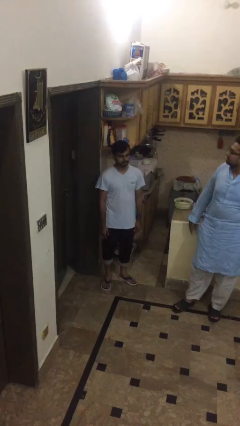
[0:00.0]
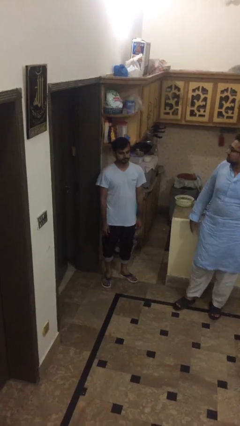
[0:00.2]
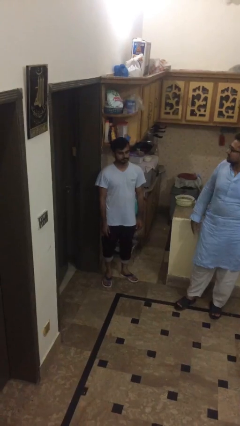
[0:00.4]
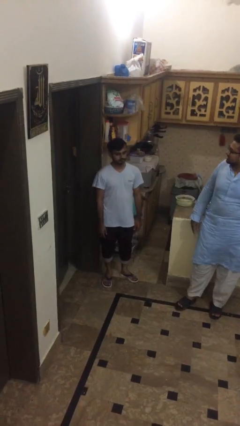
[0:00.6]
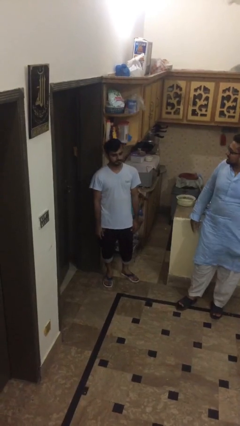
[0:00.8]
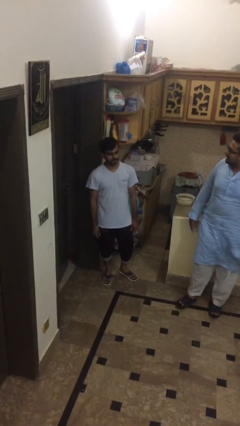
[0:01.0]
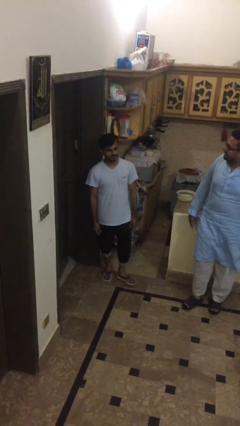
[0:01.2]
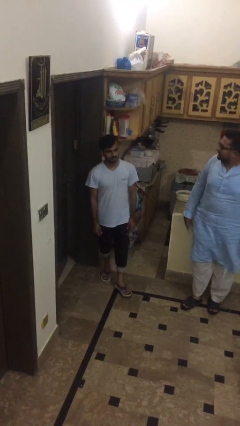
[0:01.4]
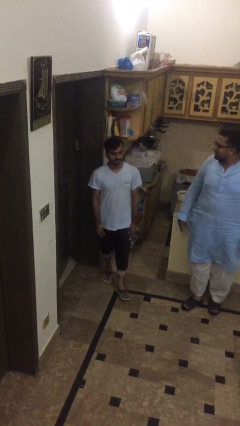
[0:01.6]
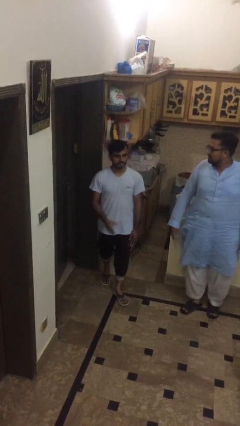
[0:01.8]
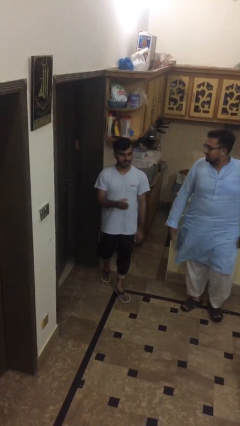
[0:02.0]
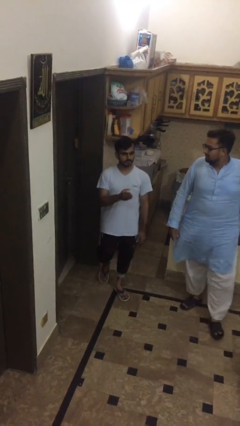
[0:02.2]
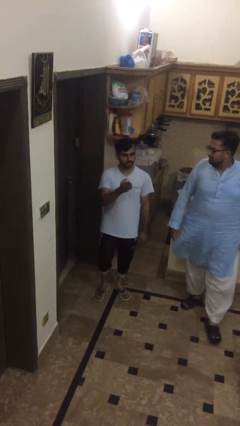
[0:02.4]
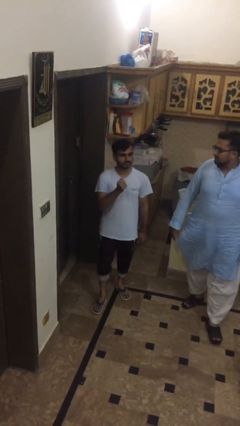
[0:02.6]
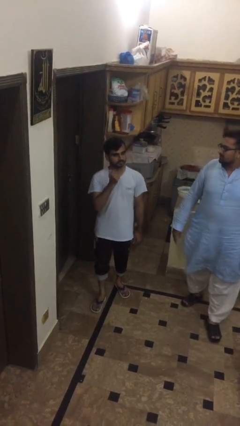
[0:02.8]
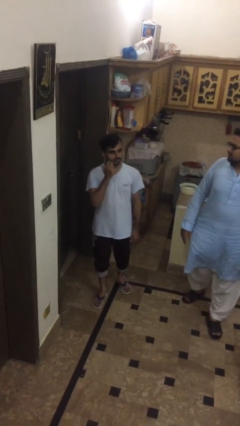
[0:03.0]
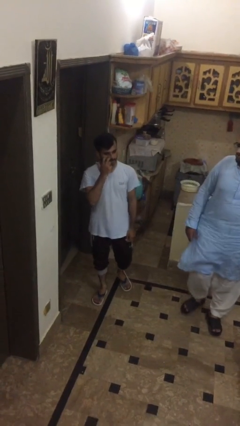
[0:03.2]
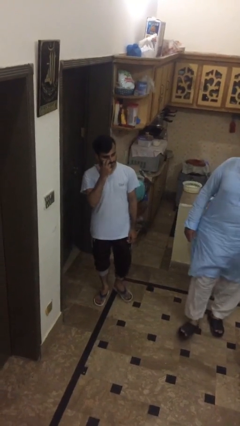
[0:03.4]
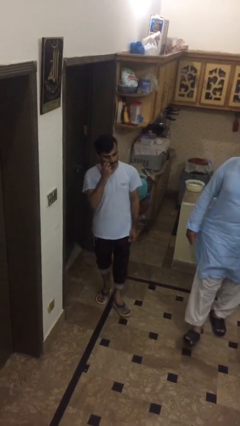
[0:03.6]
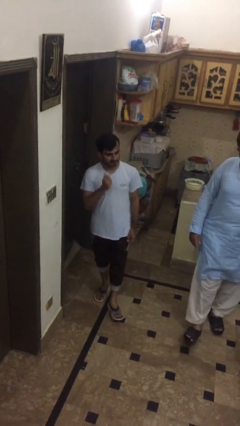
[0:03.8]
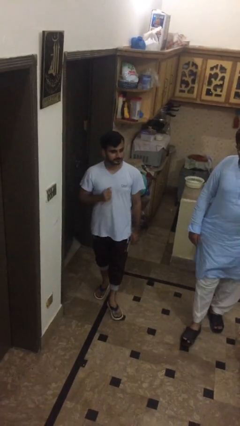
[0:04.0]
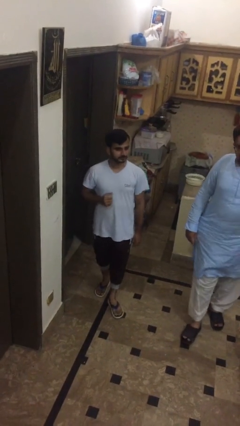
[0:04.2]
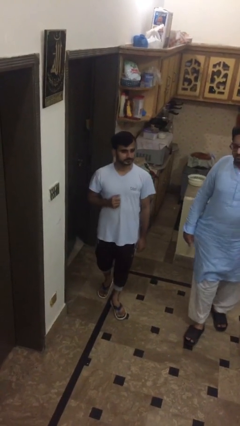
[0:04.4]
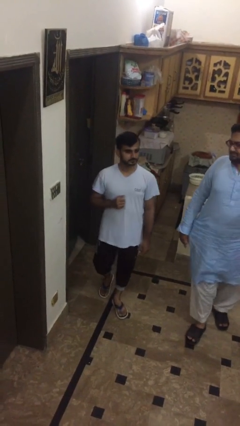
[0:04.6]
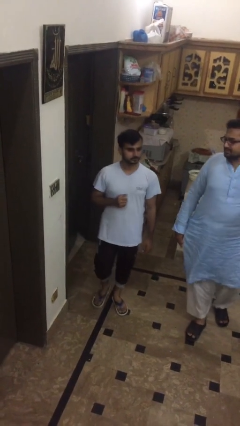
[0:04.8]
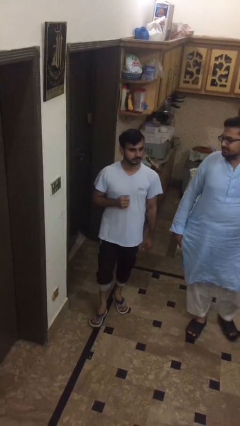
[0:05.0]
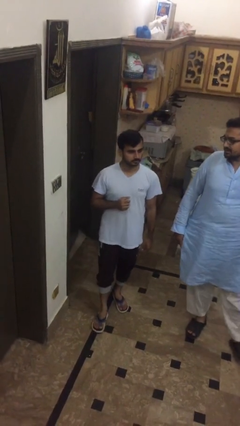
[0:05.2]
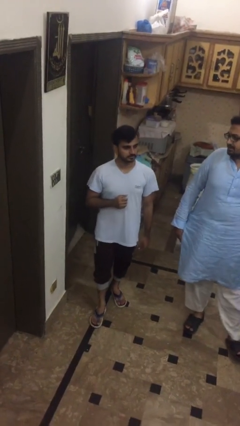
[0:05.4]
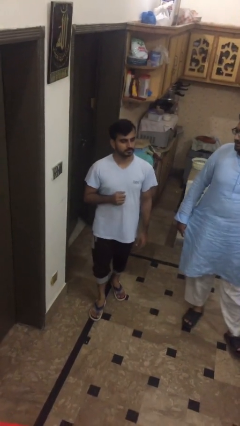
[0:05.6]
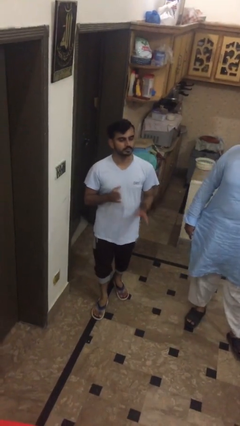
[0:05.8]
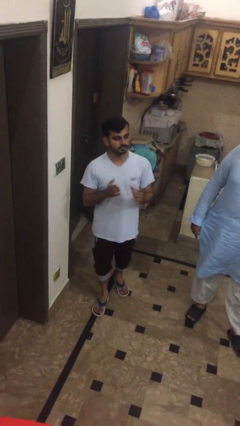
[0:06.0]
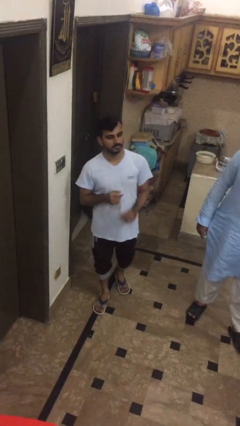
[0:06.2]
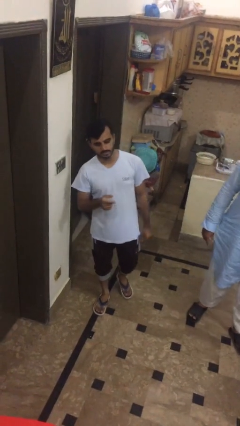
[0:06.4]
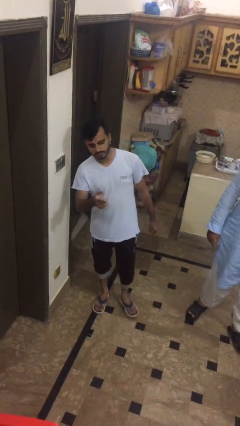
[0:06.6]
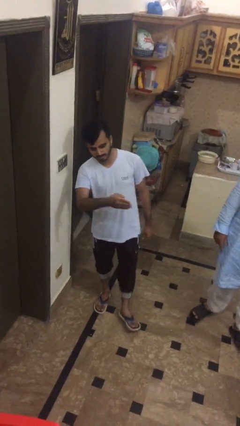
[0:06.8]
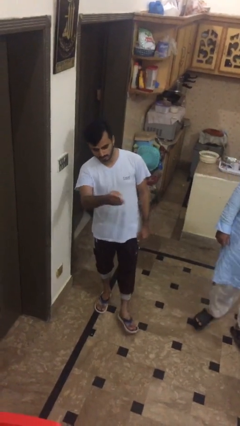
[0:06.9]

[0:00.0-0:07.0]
person talks to person

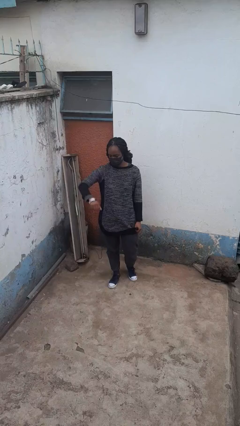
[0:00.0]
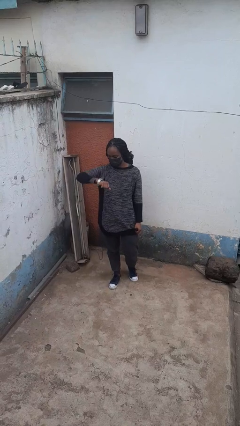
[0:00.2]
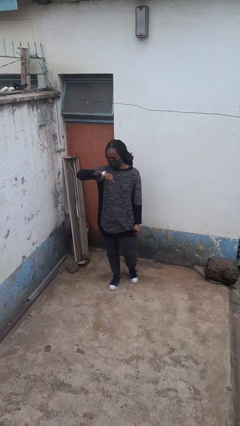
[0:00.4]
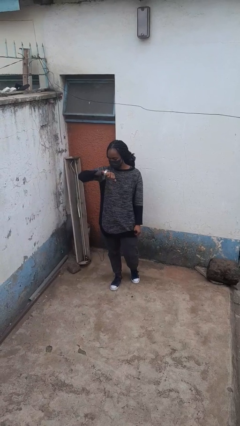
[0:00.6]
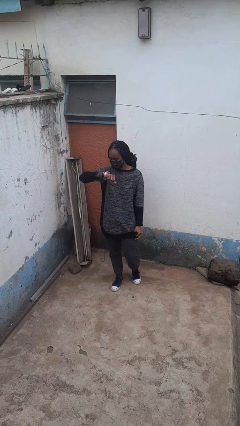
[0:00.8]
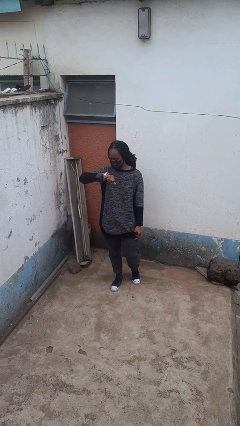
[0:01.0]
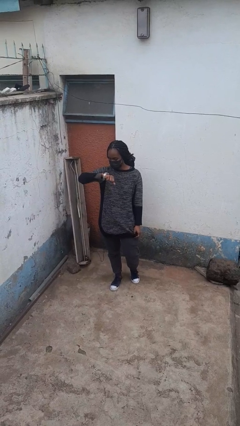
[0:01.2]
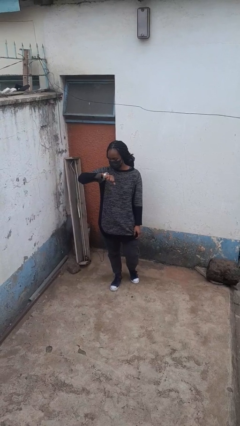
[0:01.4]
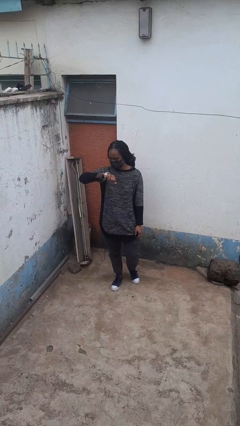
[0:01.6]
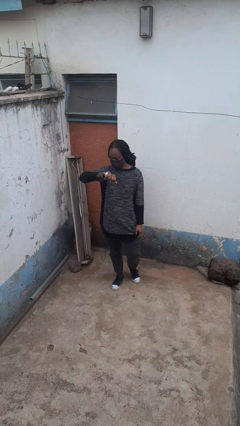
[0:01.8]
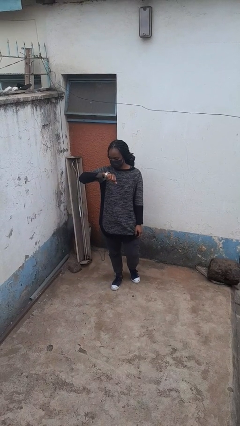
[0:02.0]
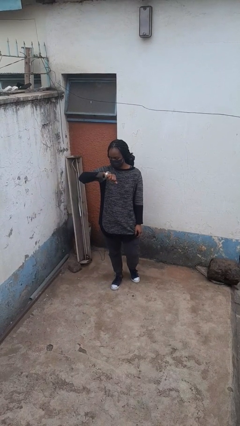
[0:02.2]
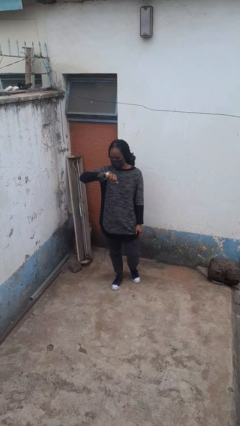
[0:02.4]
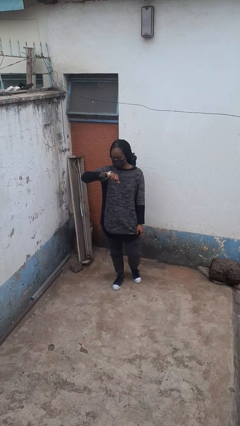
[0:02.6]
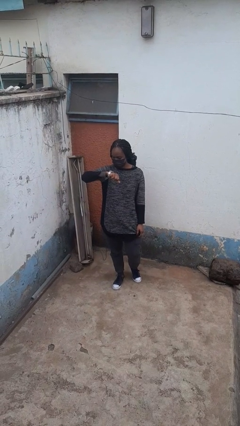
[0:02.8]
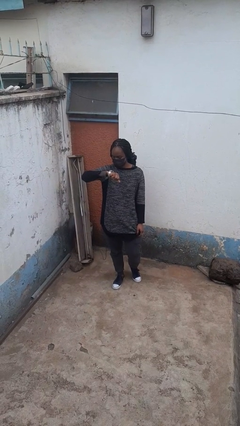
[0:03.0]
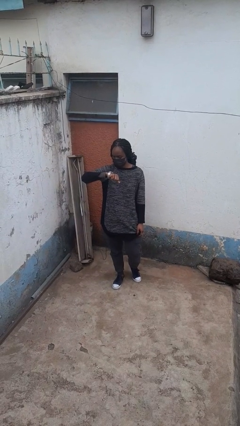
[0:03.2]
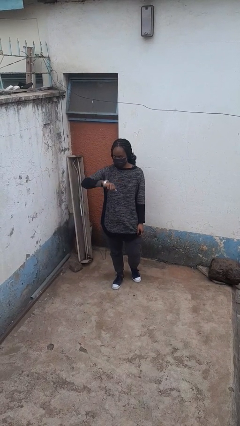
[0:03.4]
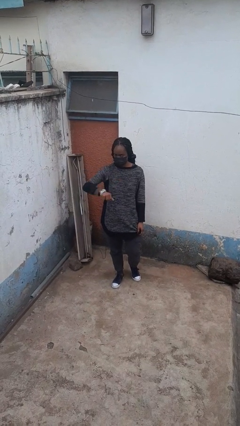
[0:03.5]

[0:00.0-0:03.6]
person looks at wristwatch

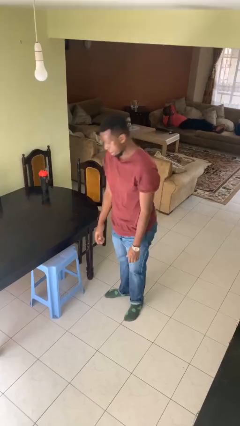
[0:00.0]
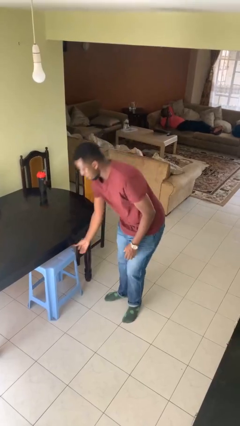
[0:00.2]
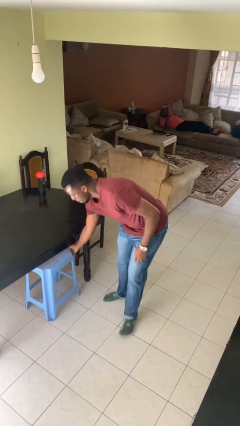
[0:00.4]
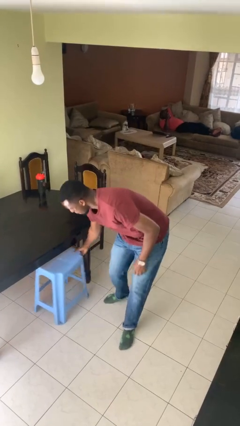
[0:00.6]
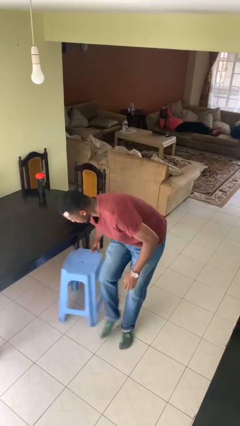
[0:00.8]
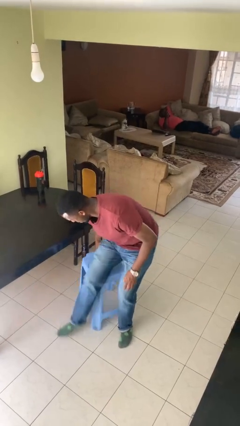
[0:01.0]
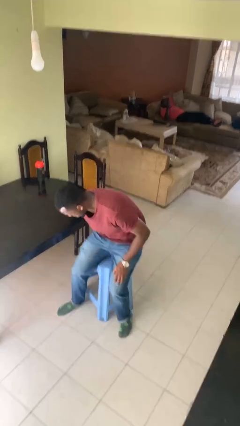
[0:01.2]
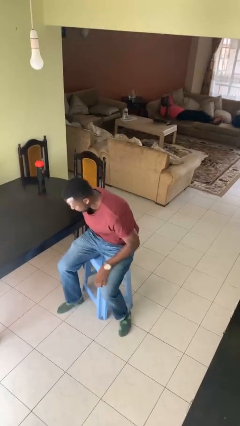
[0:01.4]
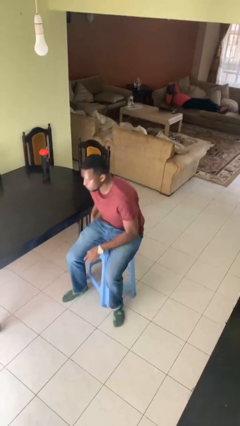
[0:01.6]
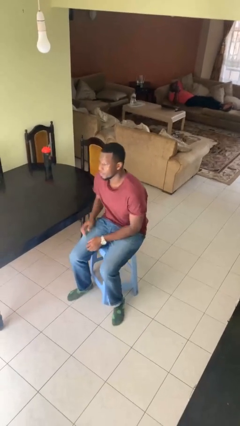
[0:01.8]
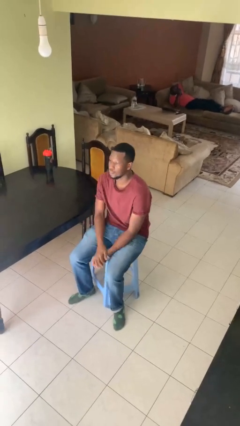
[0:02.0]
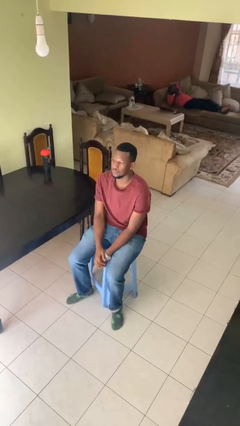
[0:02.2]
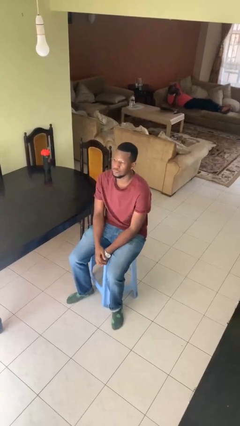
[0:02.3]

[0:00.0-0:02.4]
person sits down

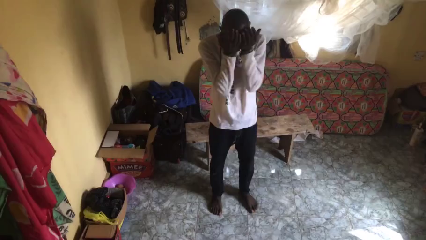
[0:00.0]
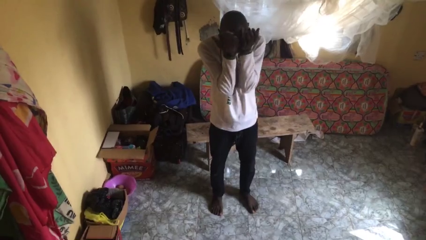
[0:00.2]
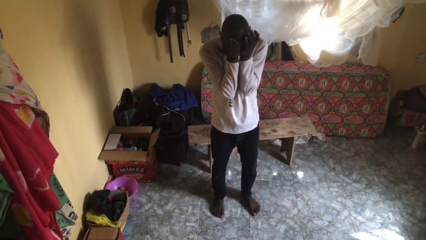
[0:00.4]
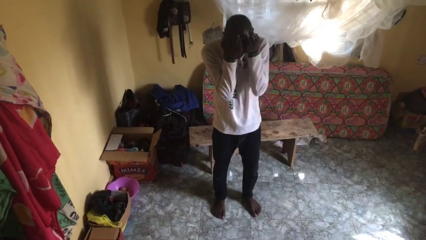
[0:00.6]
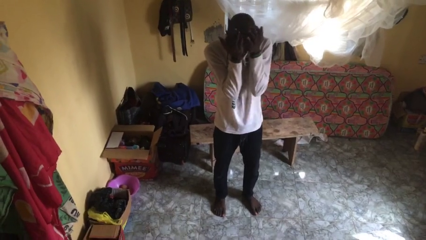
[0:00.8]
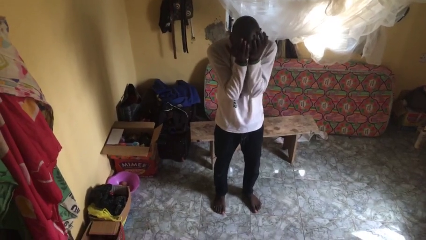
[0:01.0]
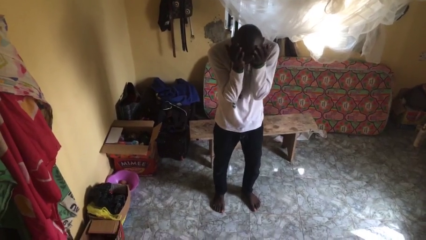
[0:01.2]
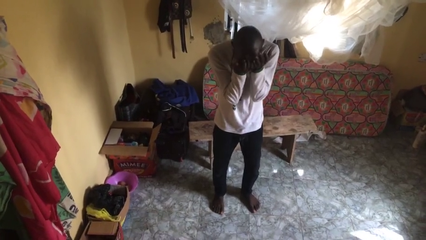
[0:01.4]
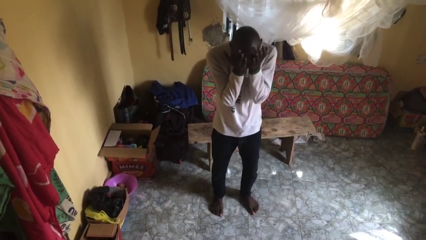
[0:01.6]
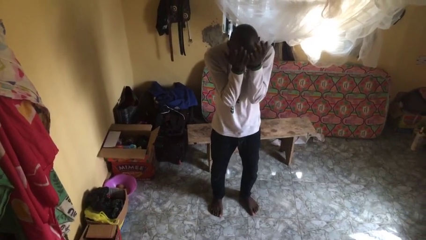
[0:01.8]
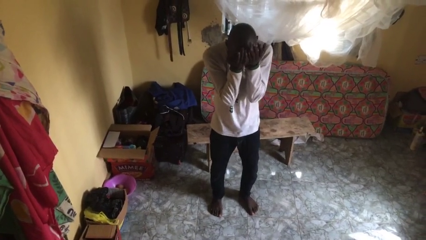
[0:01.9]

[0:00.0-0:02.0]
person rubs eyes

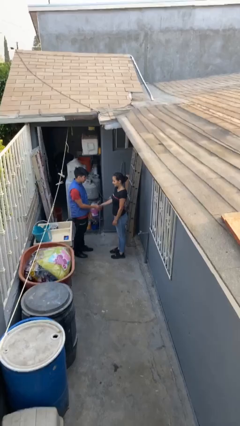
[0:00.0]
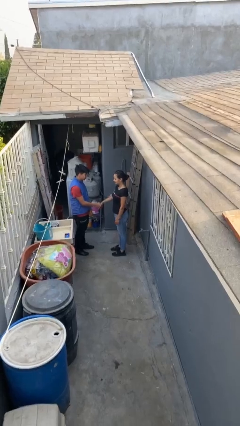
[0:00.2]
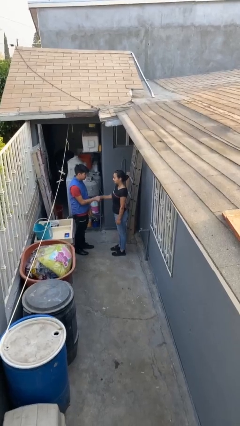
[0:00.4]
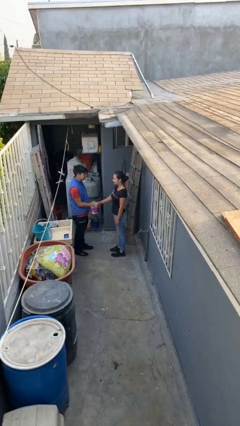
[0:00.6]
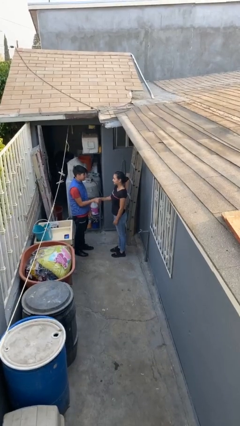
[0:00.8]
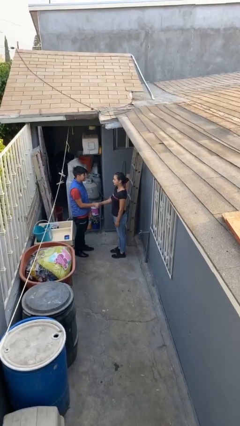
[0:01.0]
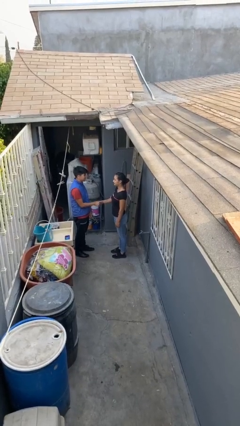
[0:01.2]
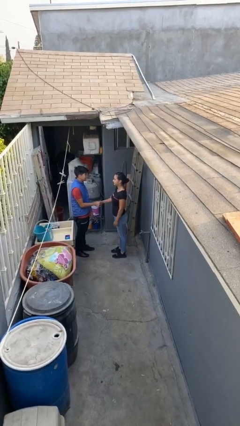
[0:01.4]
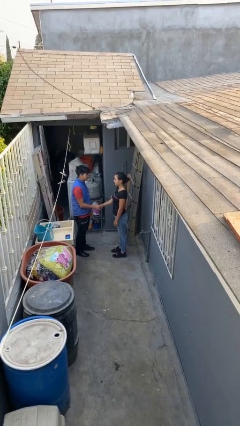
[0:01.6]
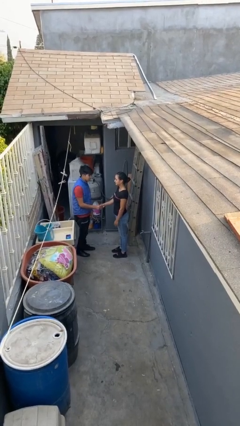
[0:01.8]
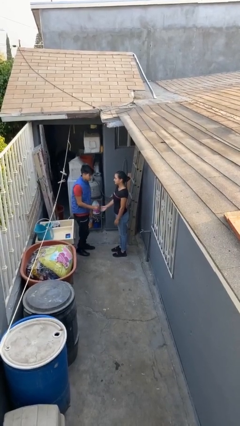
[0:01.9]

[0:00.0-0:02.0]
person shakes hand

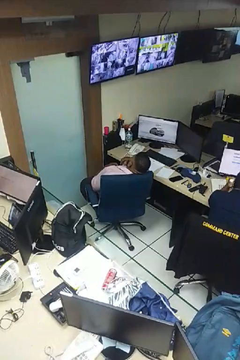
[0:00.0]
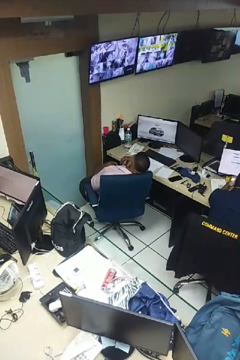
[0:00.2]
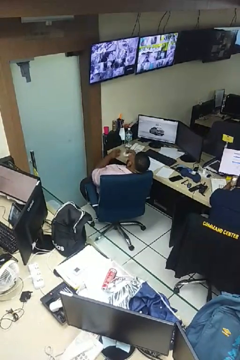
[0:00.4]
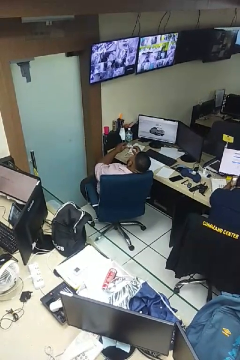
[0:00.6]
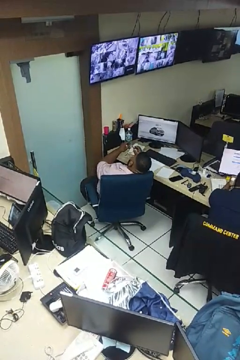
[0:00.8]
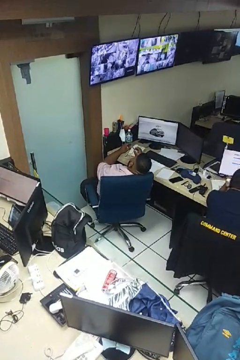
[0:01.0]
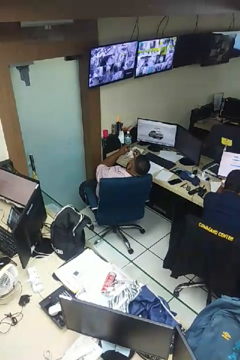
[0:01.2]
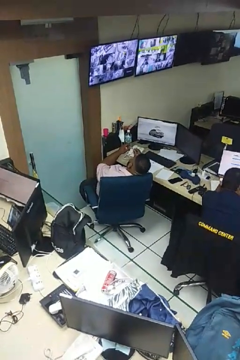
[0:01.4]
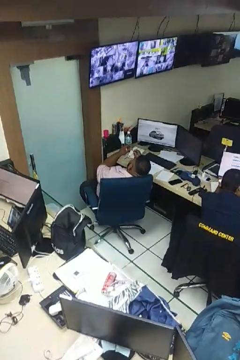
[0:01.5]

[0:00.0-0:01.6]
person clips fingernails
